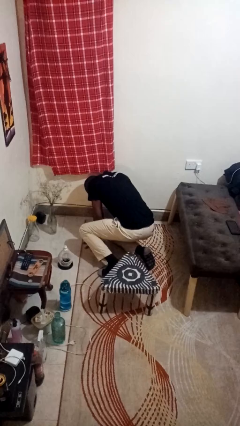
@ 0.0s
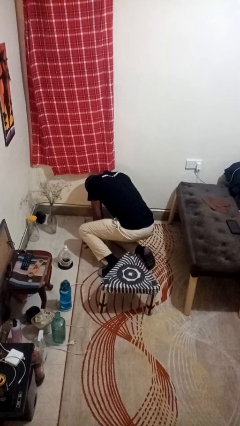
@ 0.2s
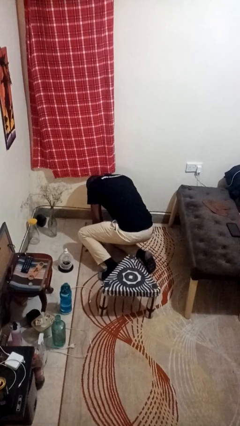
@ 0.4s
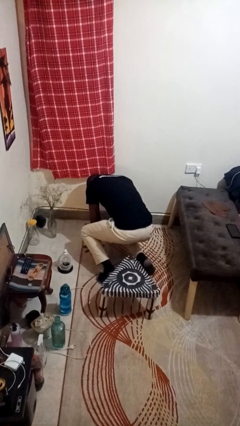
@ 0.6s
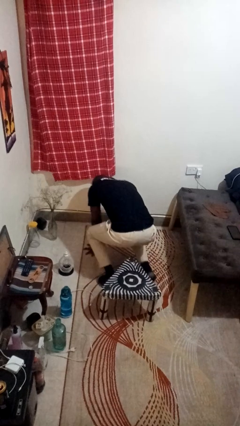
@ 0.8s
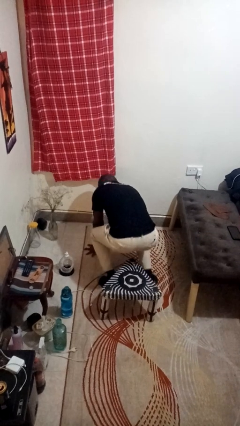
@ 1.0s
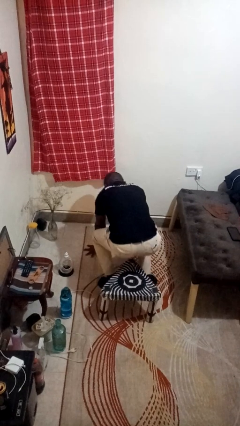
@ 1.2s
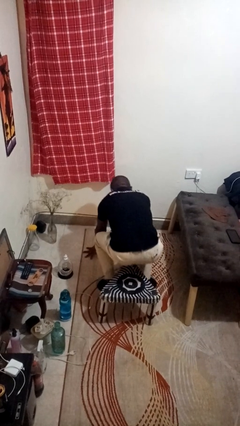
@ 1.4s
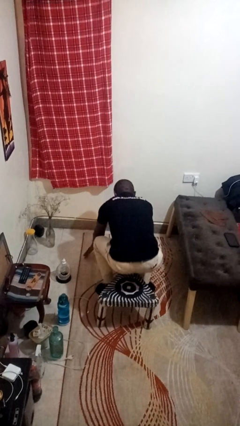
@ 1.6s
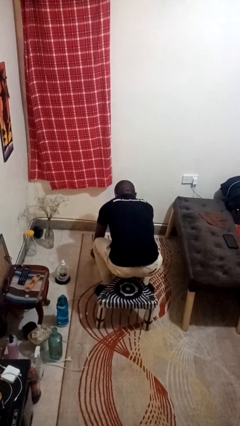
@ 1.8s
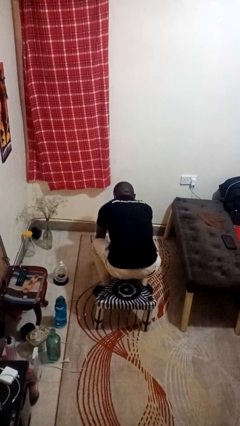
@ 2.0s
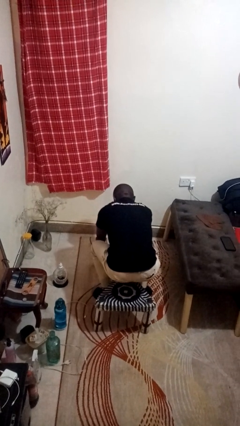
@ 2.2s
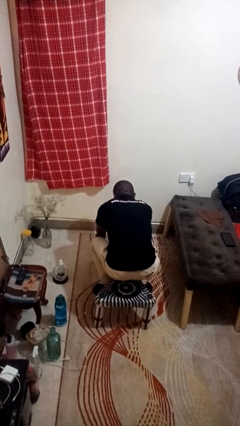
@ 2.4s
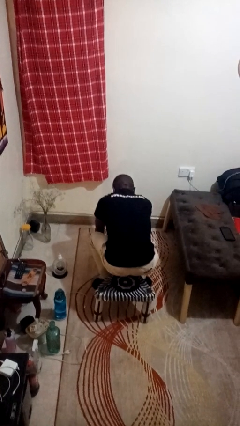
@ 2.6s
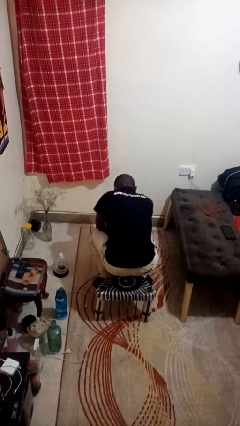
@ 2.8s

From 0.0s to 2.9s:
person stands up from floor

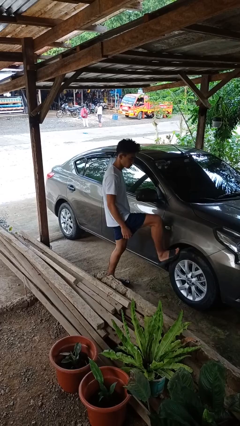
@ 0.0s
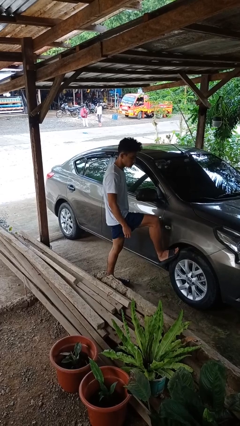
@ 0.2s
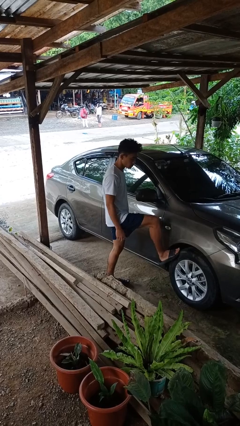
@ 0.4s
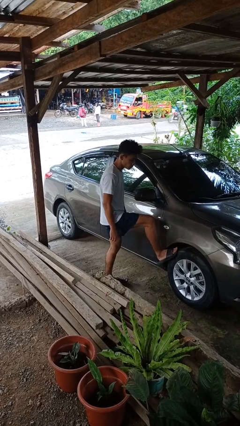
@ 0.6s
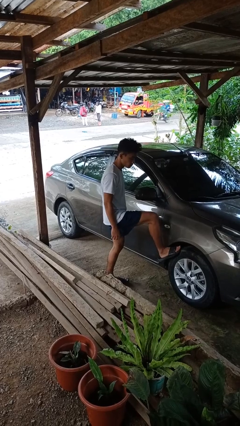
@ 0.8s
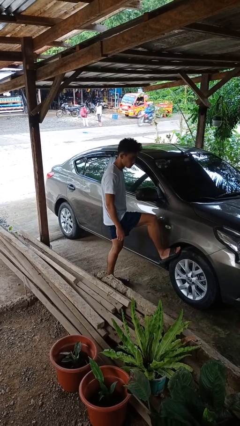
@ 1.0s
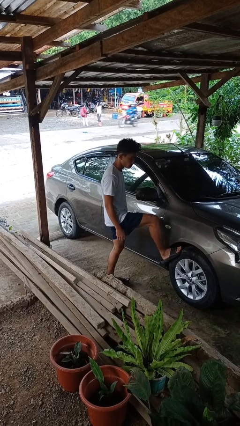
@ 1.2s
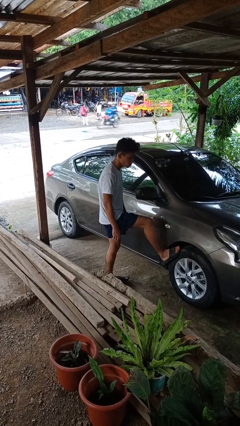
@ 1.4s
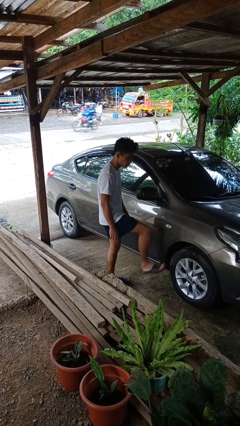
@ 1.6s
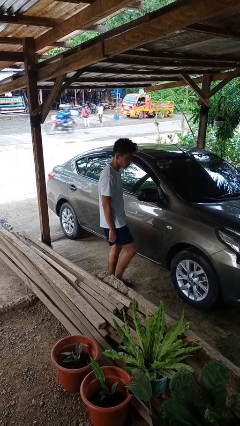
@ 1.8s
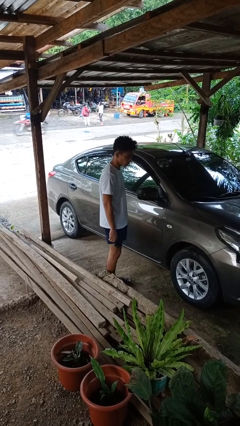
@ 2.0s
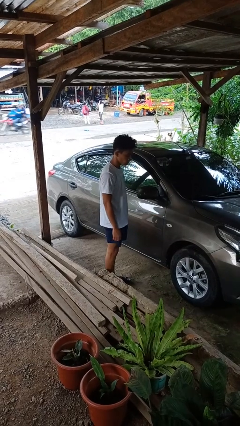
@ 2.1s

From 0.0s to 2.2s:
person kicks car tires

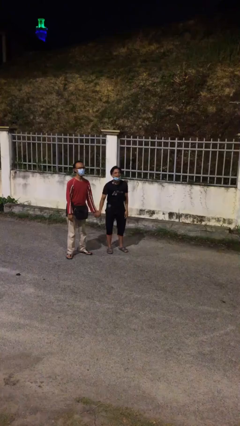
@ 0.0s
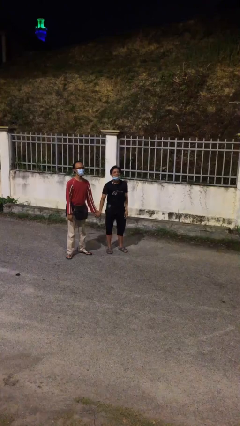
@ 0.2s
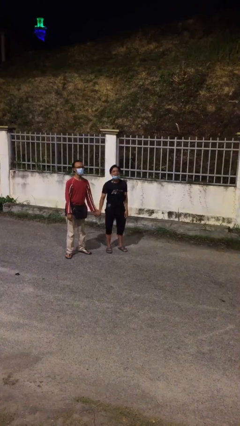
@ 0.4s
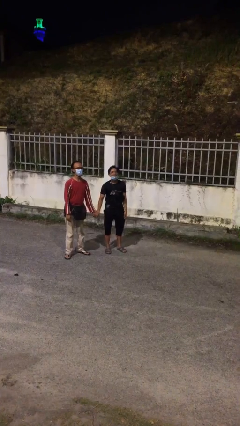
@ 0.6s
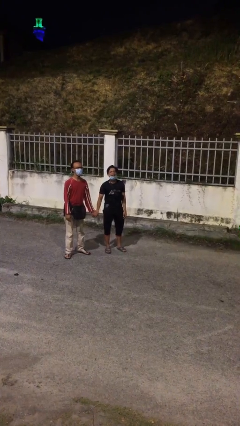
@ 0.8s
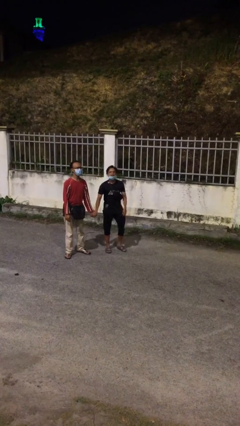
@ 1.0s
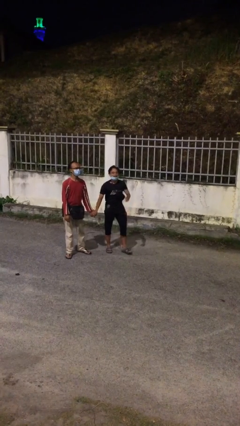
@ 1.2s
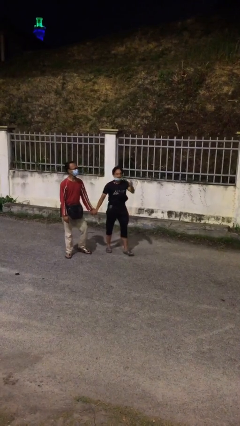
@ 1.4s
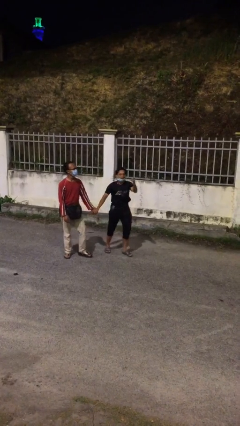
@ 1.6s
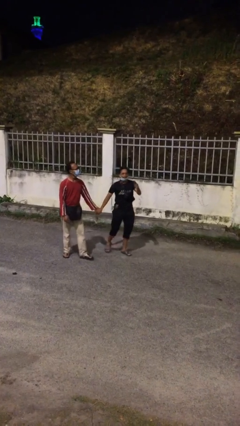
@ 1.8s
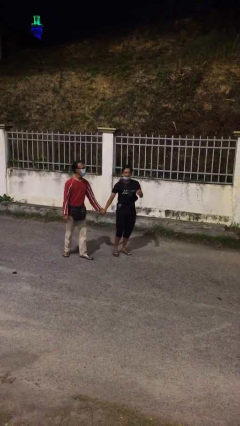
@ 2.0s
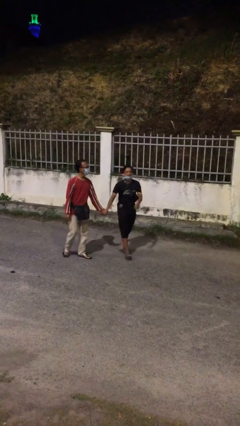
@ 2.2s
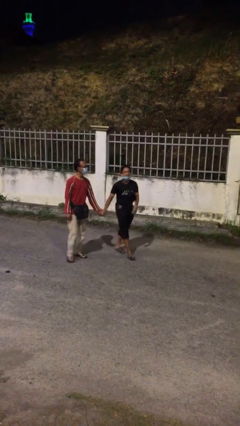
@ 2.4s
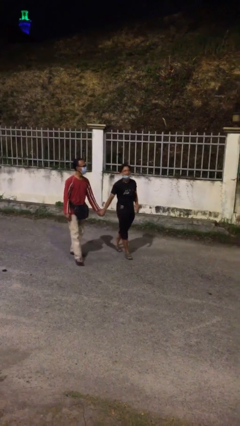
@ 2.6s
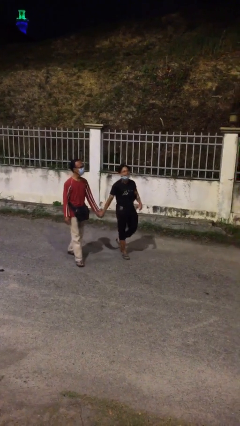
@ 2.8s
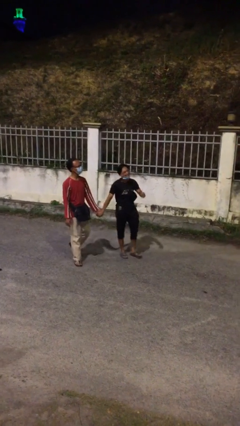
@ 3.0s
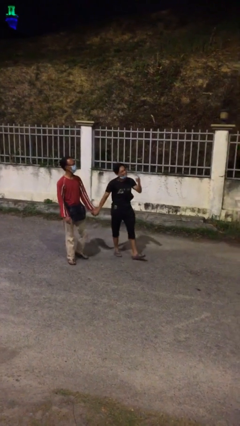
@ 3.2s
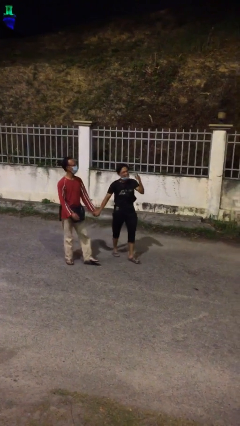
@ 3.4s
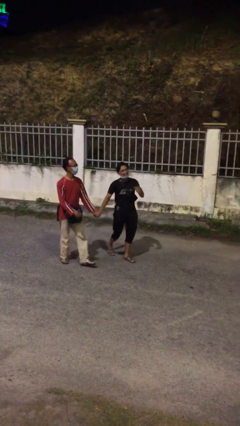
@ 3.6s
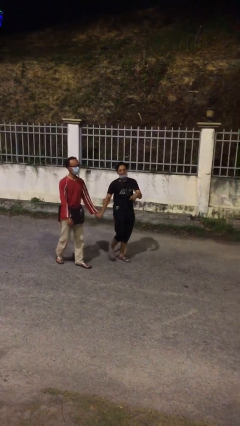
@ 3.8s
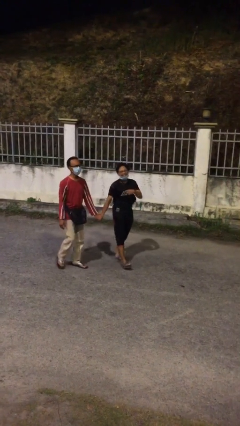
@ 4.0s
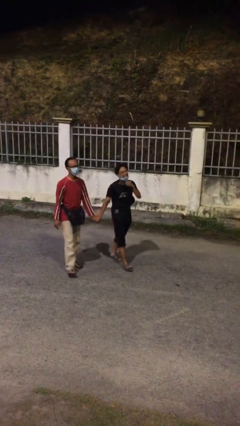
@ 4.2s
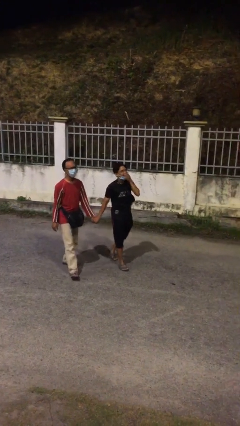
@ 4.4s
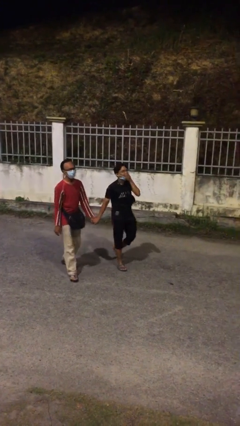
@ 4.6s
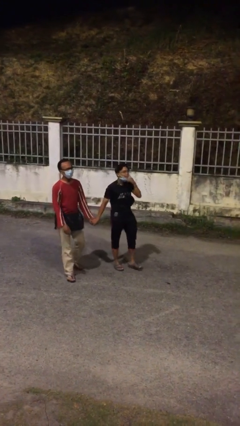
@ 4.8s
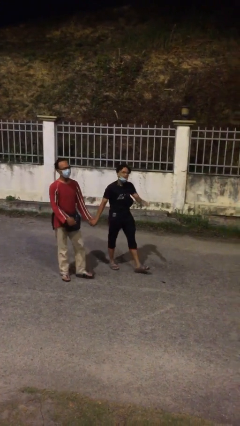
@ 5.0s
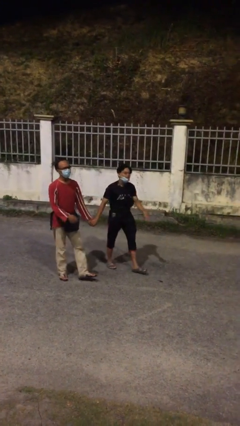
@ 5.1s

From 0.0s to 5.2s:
person holds hand

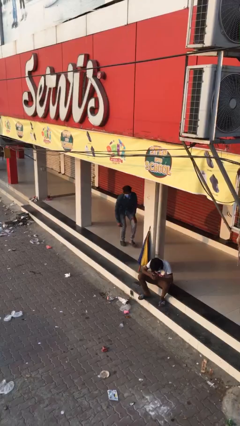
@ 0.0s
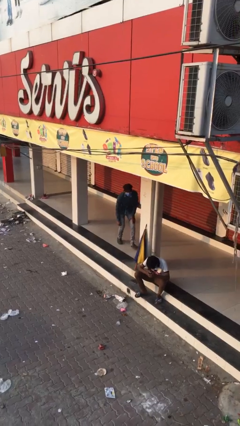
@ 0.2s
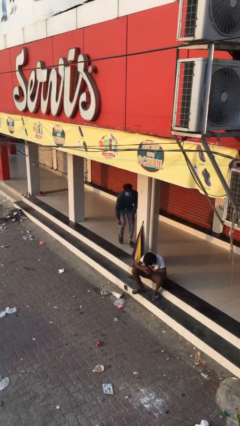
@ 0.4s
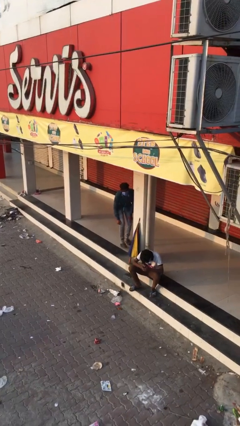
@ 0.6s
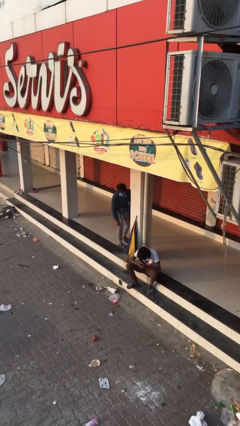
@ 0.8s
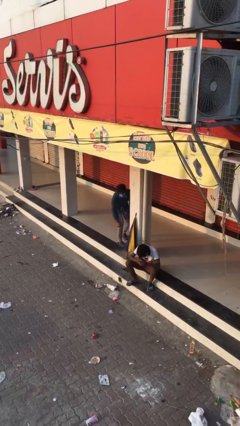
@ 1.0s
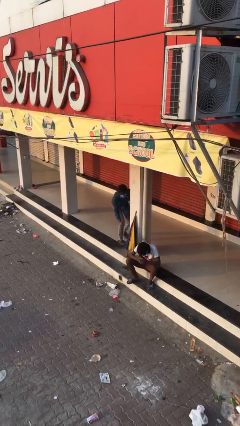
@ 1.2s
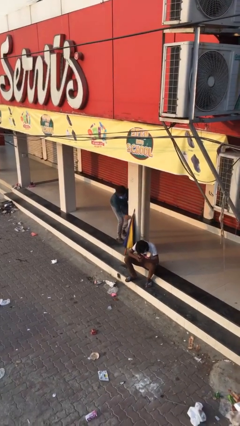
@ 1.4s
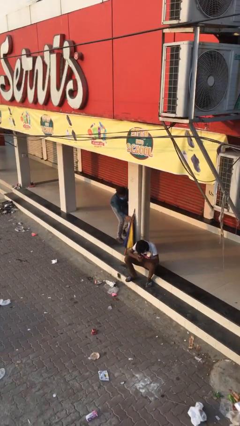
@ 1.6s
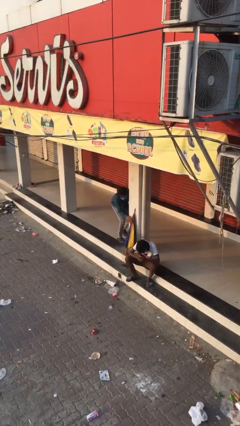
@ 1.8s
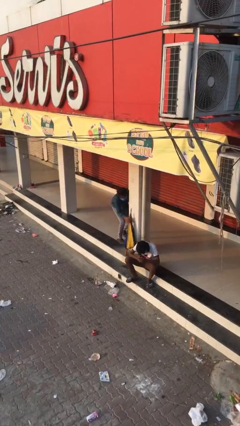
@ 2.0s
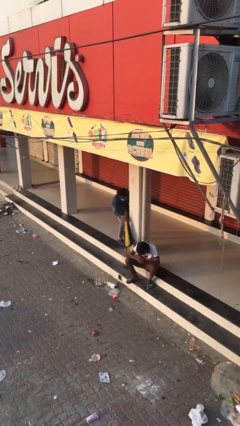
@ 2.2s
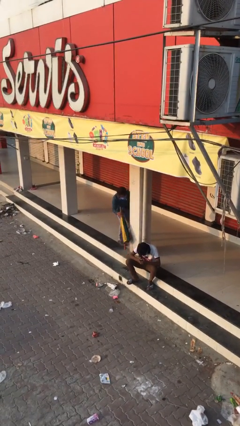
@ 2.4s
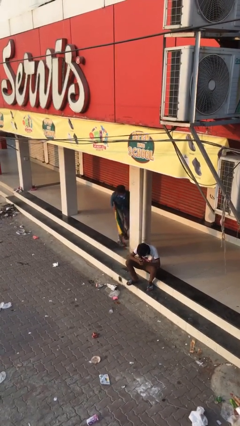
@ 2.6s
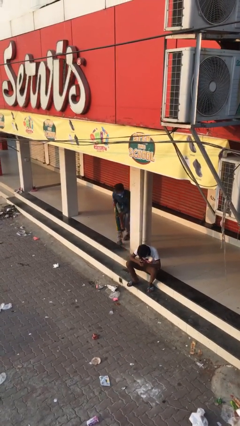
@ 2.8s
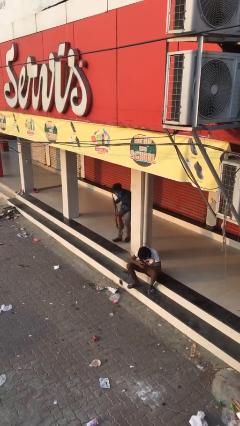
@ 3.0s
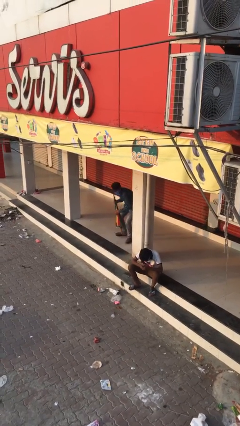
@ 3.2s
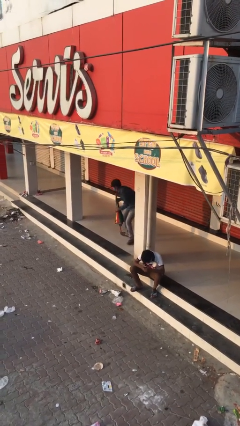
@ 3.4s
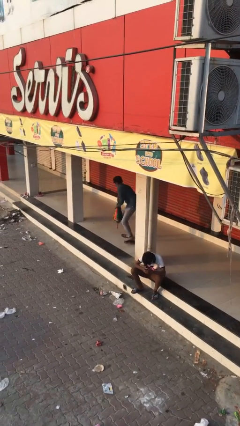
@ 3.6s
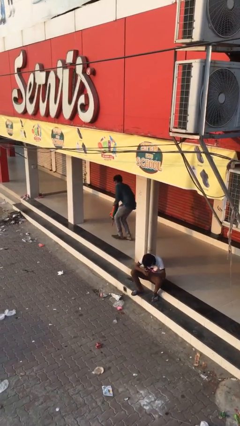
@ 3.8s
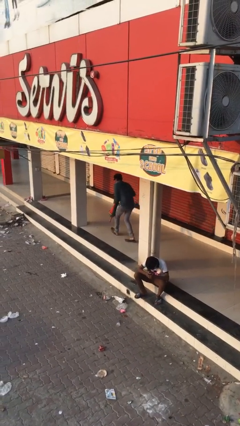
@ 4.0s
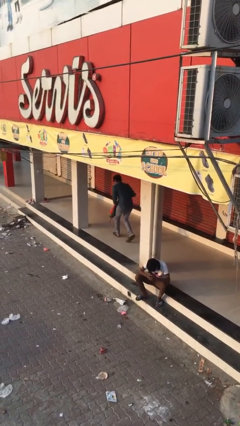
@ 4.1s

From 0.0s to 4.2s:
person steals object from person

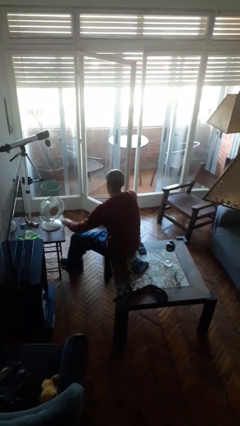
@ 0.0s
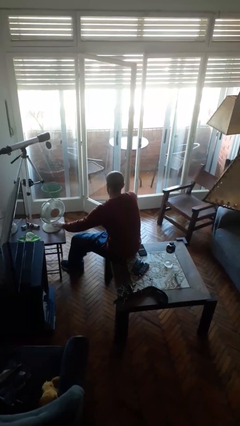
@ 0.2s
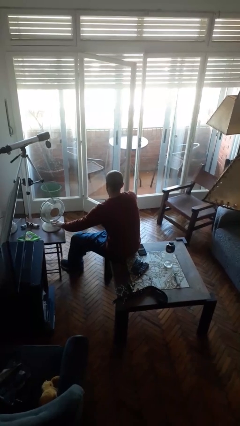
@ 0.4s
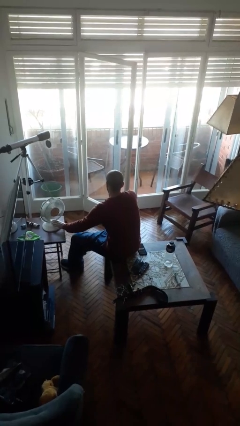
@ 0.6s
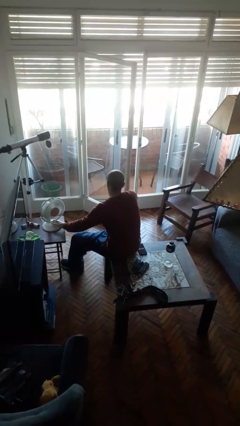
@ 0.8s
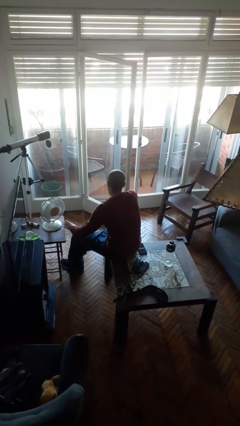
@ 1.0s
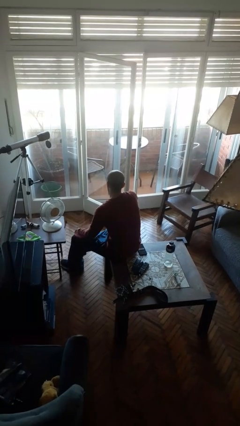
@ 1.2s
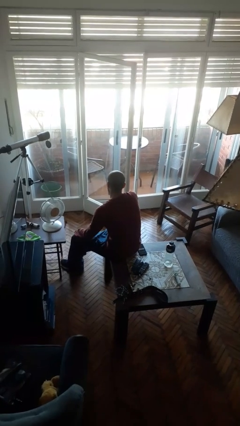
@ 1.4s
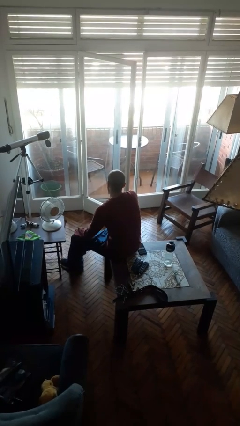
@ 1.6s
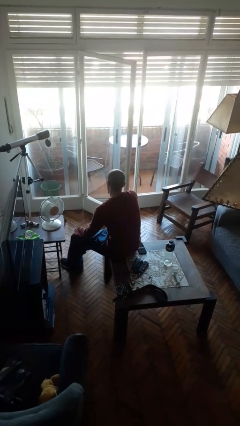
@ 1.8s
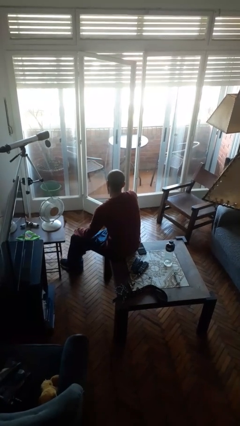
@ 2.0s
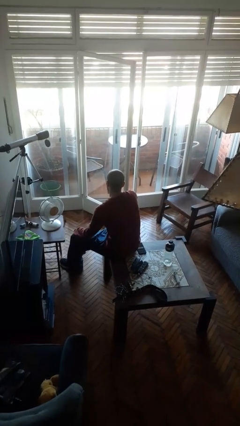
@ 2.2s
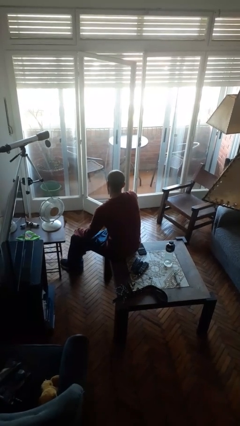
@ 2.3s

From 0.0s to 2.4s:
person turns on fan

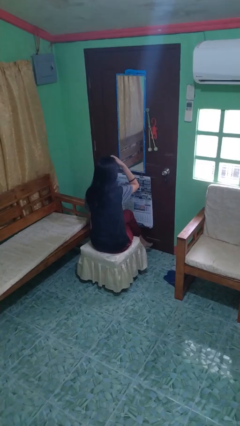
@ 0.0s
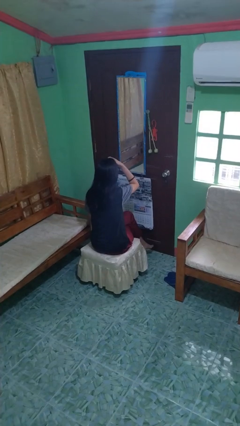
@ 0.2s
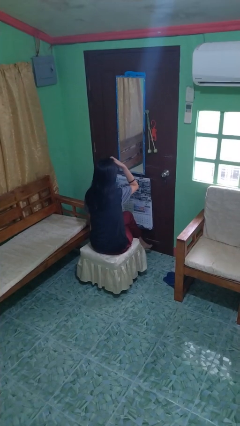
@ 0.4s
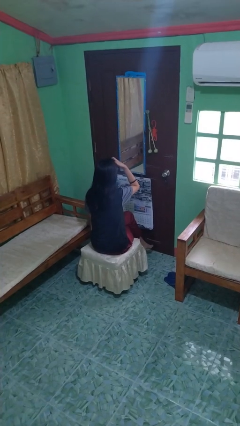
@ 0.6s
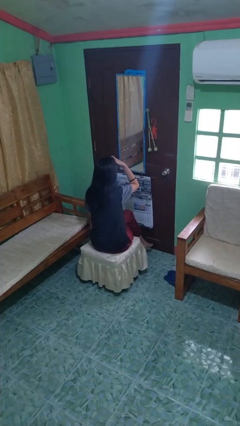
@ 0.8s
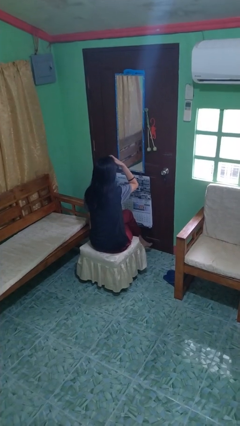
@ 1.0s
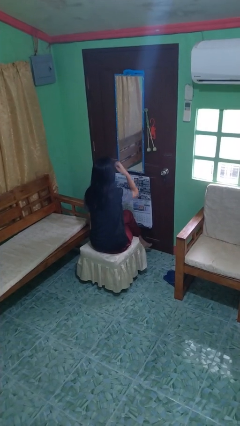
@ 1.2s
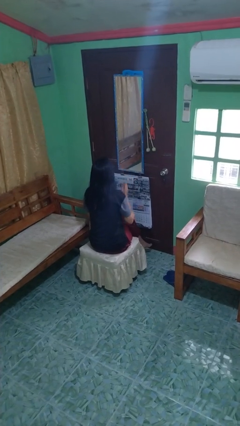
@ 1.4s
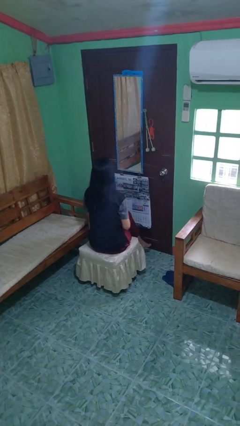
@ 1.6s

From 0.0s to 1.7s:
person scratches face
